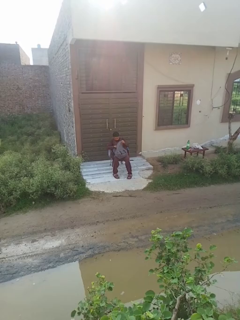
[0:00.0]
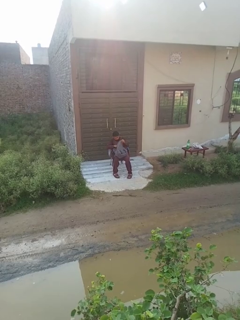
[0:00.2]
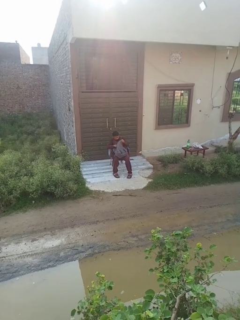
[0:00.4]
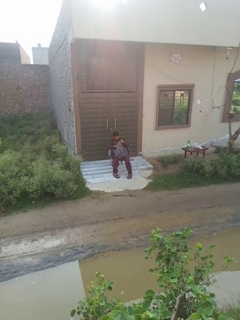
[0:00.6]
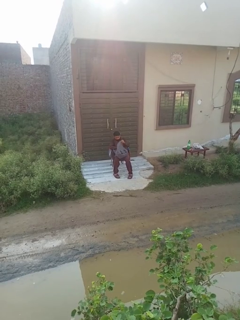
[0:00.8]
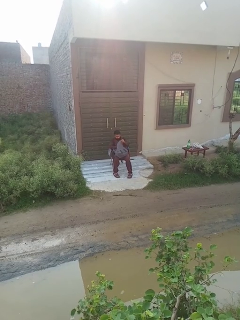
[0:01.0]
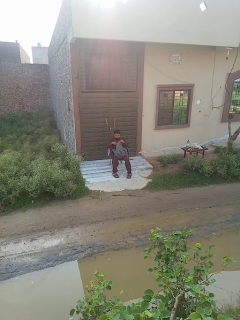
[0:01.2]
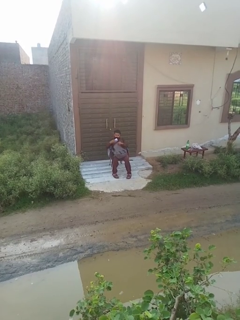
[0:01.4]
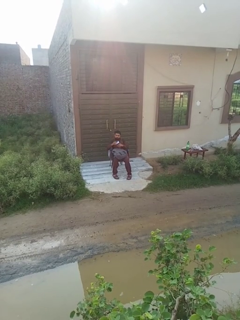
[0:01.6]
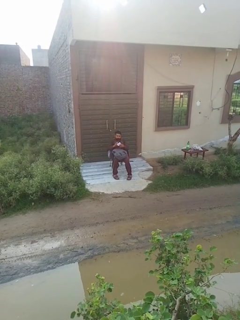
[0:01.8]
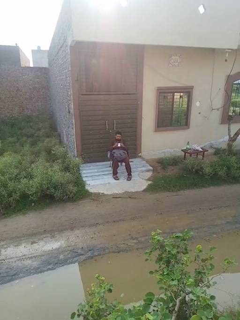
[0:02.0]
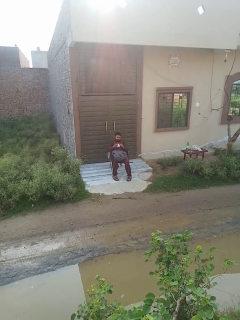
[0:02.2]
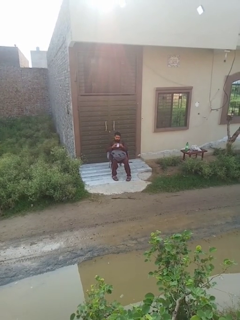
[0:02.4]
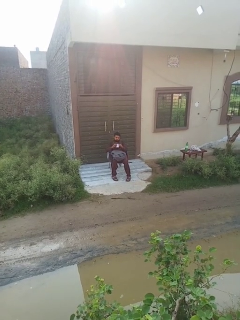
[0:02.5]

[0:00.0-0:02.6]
person takes object from backpack

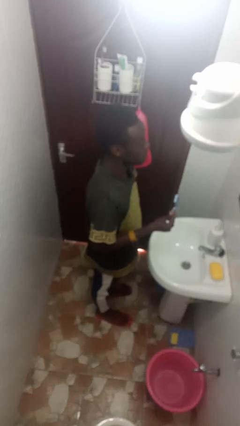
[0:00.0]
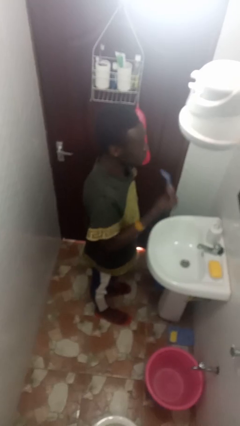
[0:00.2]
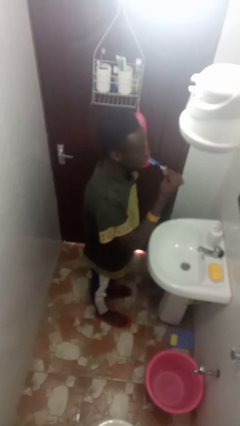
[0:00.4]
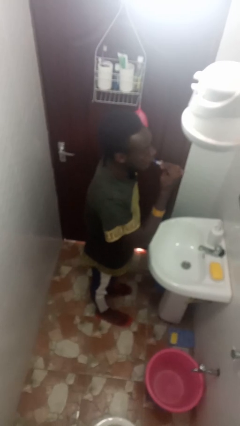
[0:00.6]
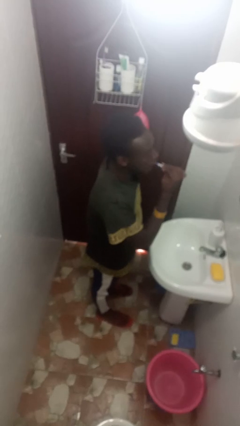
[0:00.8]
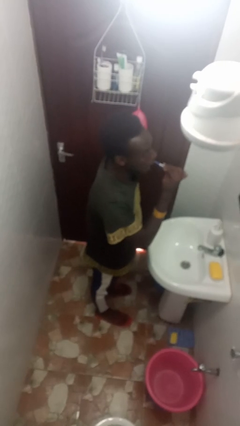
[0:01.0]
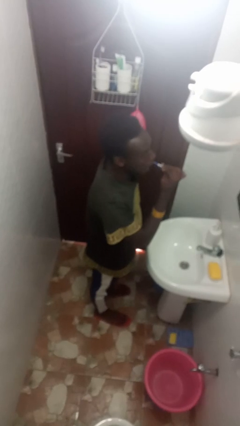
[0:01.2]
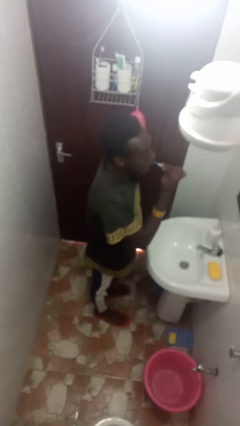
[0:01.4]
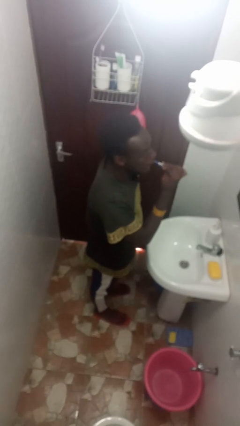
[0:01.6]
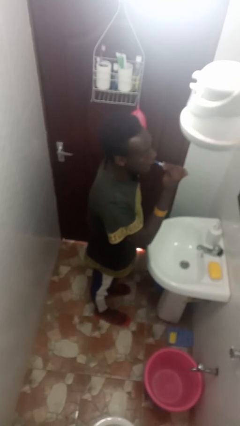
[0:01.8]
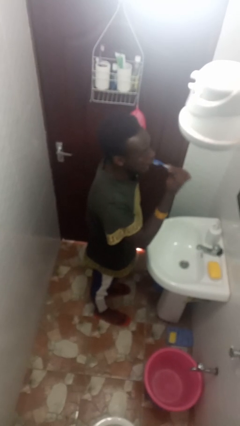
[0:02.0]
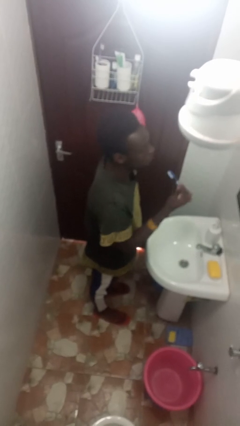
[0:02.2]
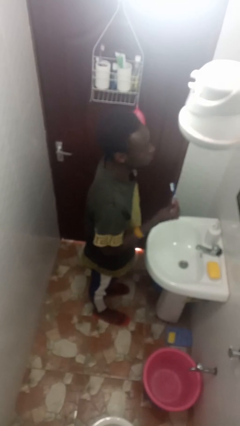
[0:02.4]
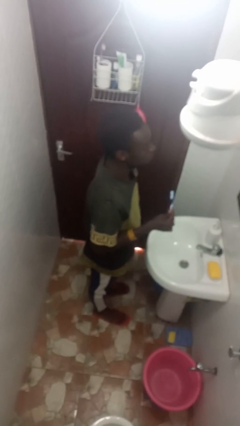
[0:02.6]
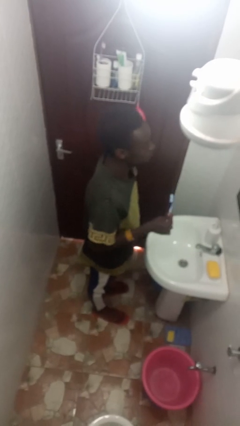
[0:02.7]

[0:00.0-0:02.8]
person brushes teeth

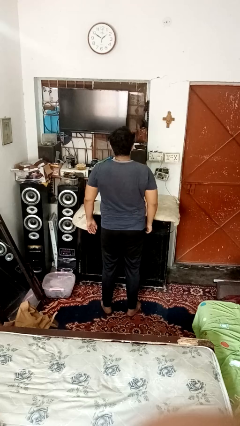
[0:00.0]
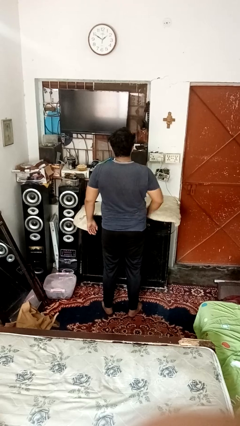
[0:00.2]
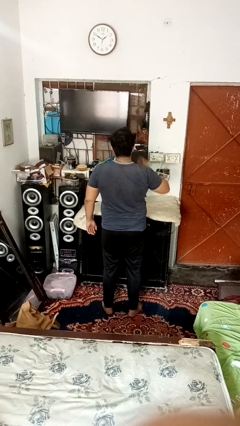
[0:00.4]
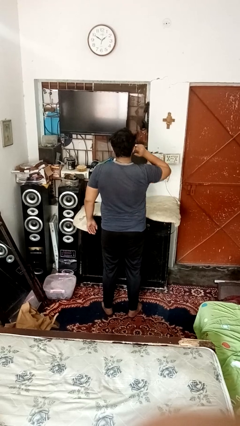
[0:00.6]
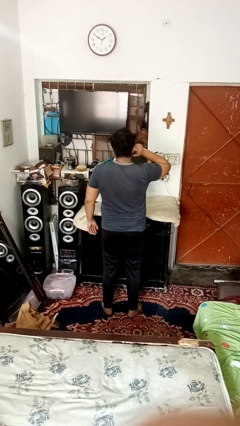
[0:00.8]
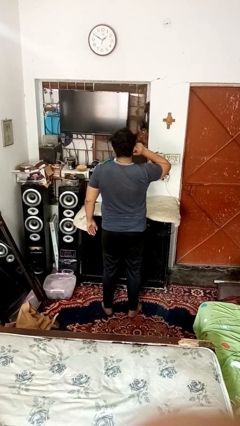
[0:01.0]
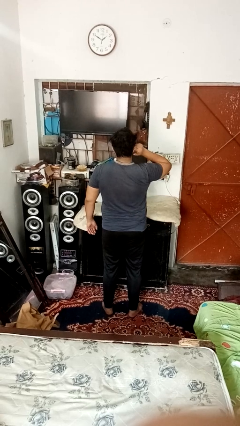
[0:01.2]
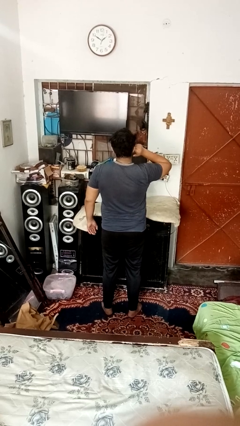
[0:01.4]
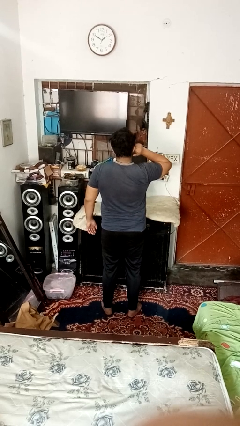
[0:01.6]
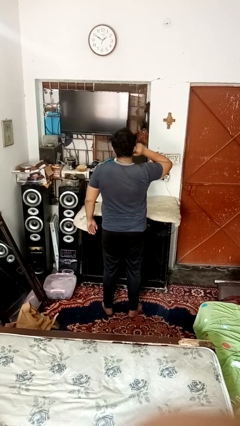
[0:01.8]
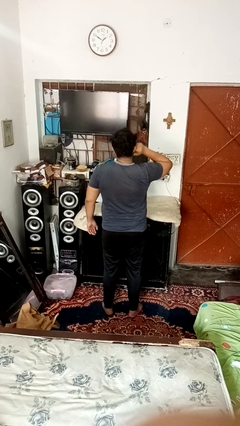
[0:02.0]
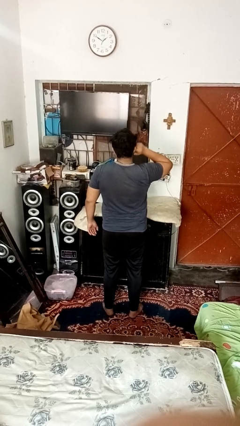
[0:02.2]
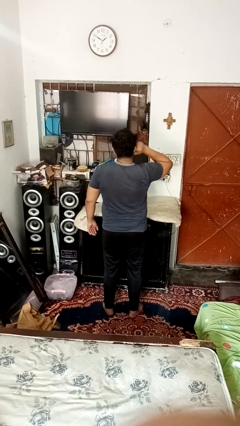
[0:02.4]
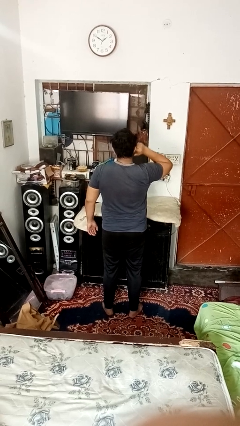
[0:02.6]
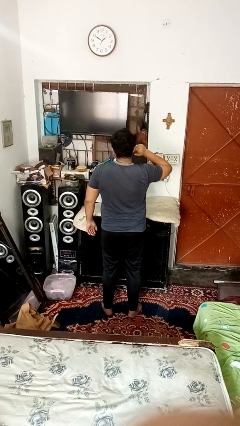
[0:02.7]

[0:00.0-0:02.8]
person puts fingers in ear

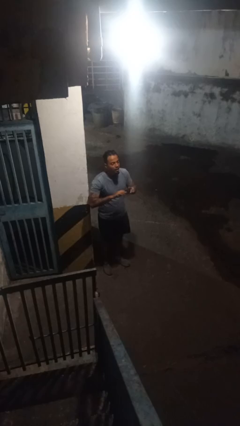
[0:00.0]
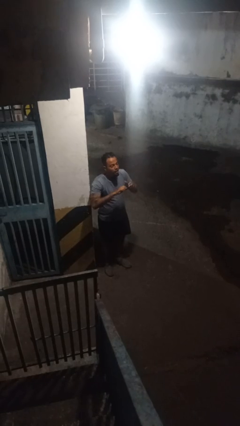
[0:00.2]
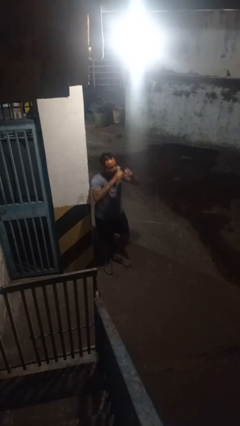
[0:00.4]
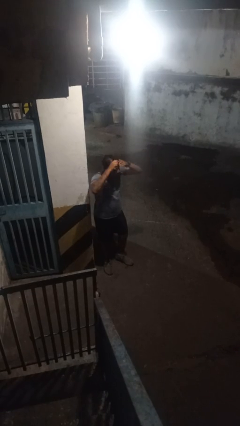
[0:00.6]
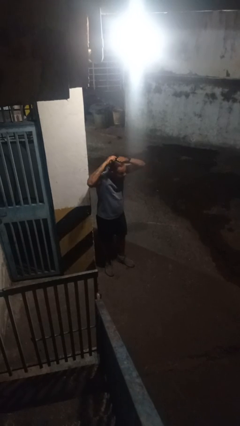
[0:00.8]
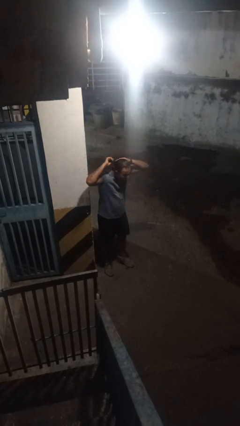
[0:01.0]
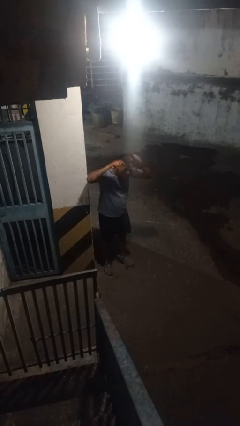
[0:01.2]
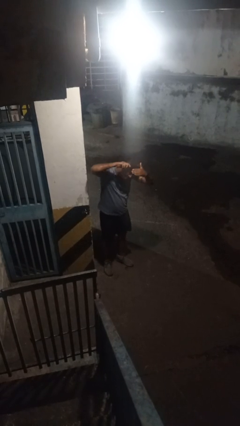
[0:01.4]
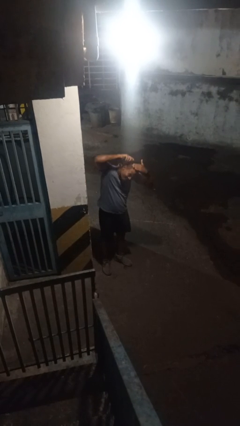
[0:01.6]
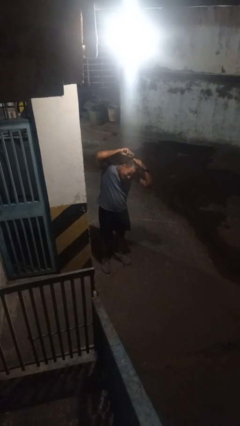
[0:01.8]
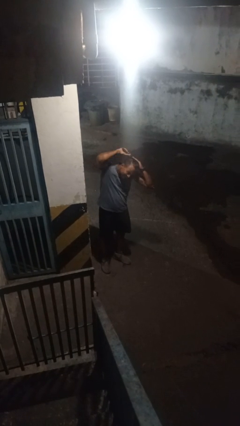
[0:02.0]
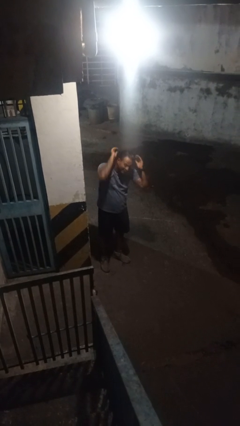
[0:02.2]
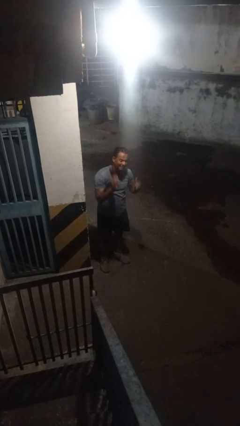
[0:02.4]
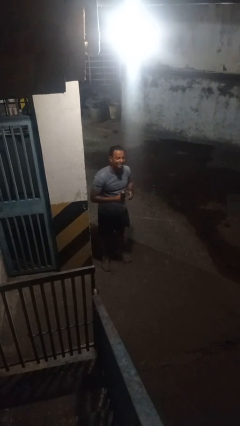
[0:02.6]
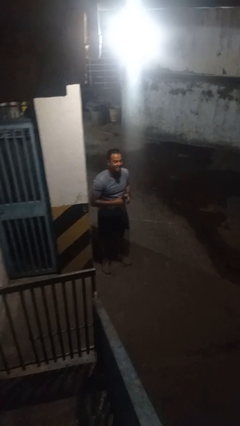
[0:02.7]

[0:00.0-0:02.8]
person brushes hair

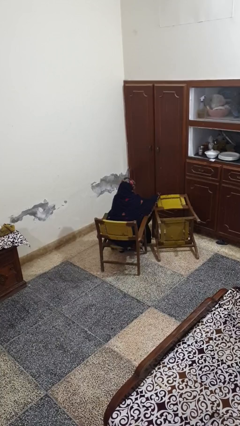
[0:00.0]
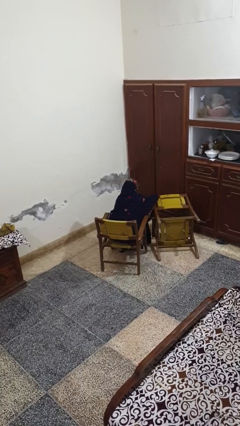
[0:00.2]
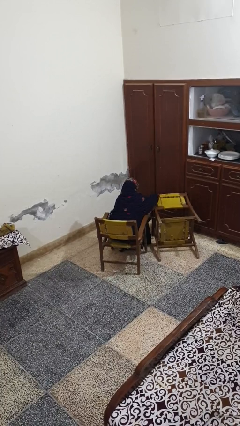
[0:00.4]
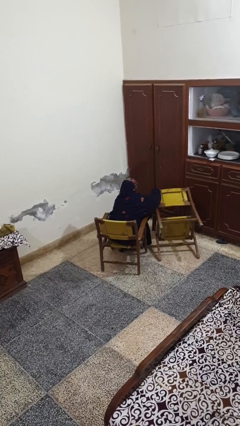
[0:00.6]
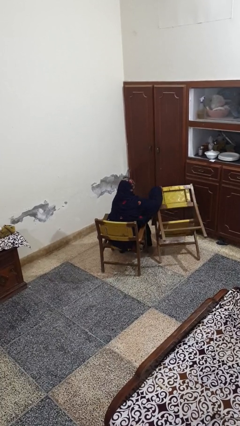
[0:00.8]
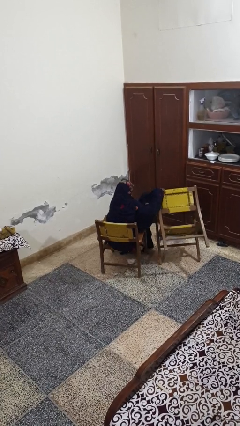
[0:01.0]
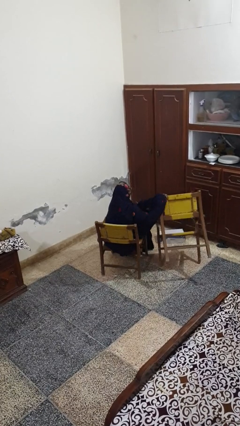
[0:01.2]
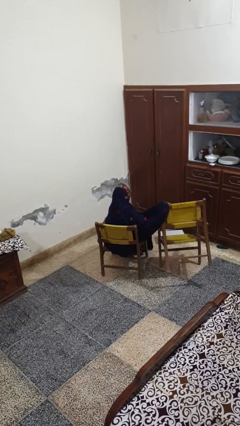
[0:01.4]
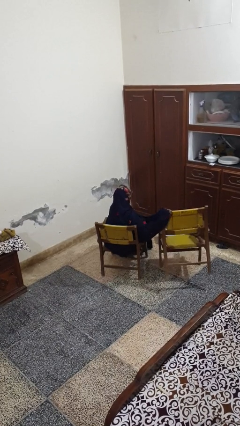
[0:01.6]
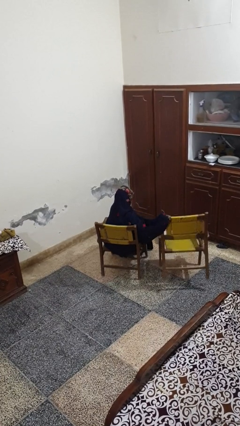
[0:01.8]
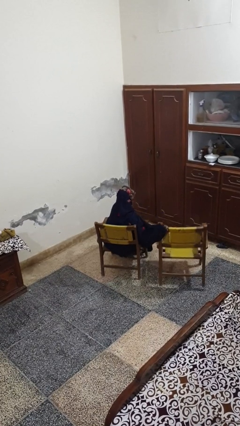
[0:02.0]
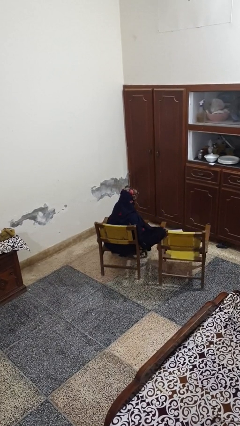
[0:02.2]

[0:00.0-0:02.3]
person sets upright furniture

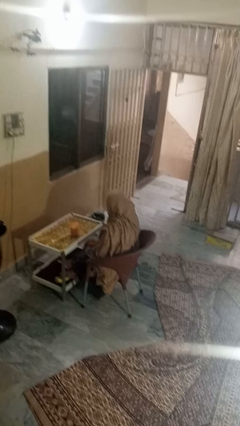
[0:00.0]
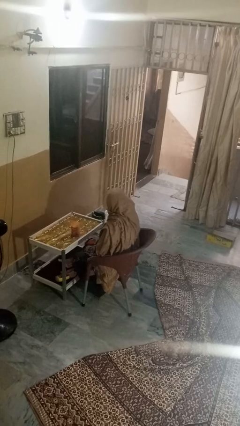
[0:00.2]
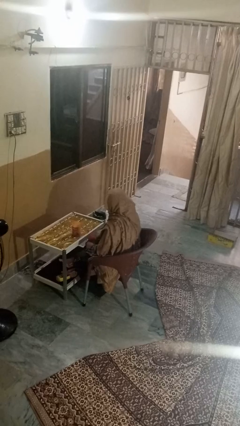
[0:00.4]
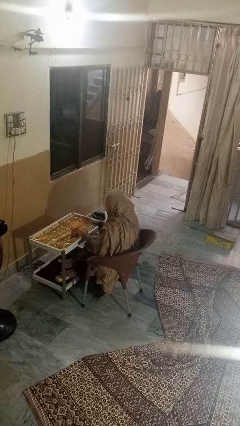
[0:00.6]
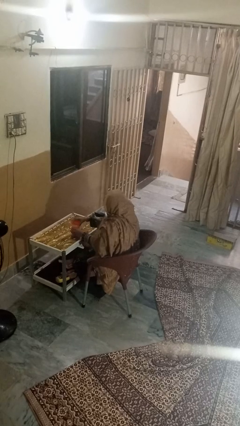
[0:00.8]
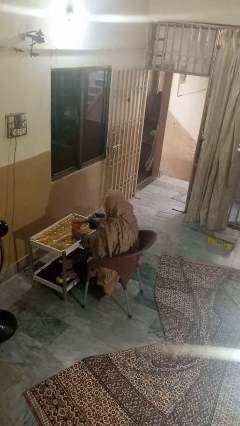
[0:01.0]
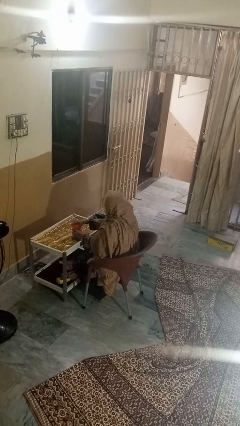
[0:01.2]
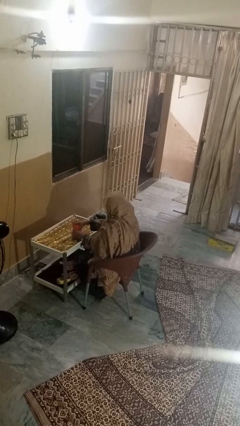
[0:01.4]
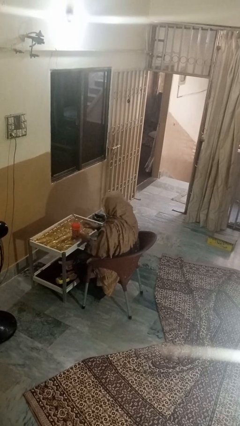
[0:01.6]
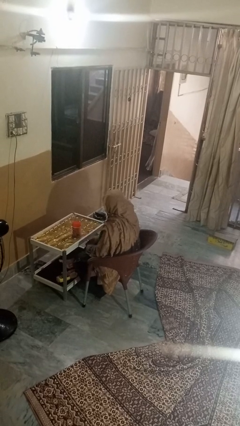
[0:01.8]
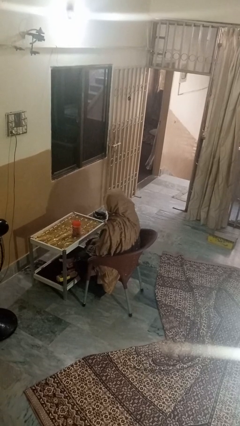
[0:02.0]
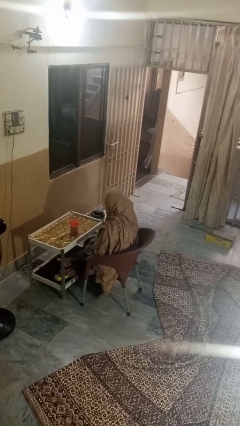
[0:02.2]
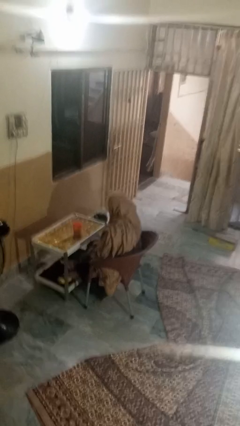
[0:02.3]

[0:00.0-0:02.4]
person closes jar

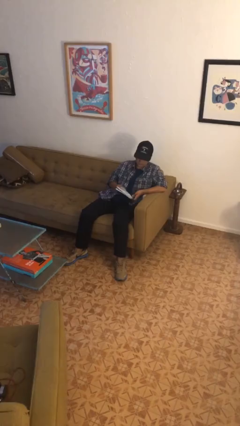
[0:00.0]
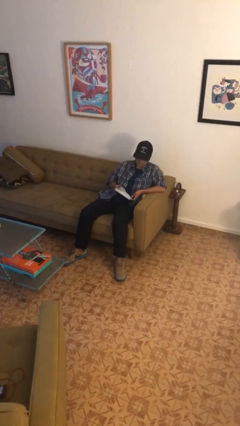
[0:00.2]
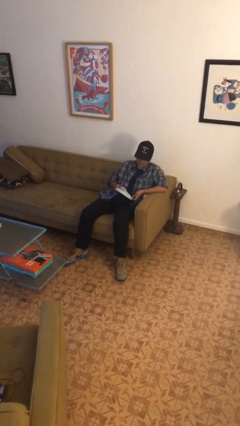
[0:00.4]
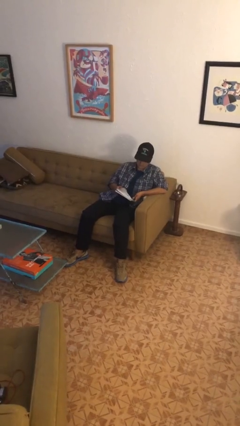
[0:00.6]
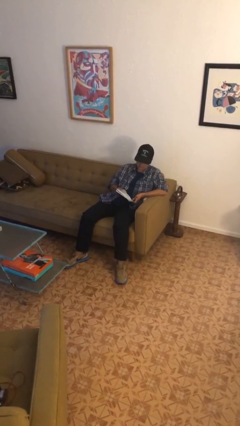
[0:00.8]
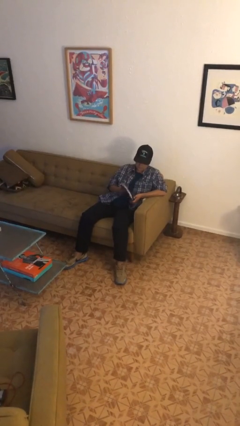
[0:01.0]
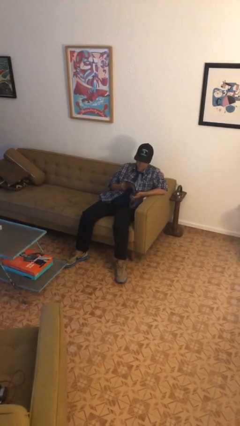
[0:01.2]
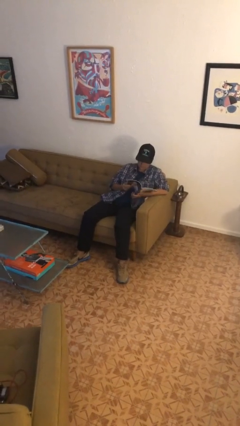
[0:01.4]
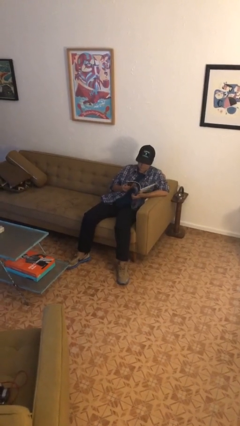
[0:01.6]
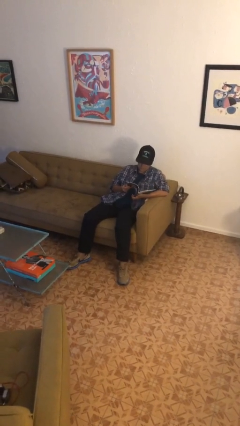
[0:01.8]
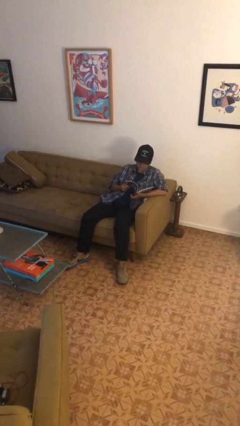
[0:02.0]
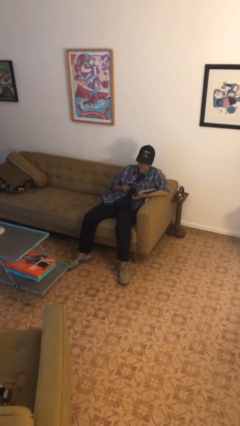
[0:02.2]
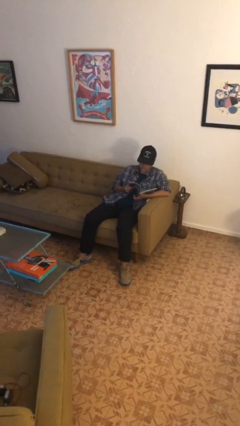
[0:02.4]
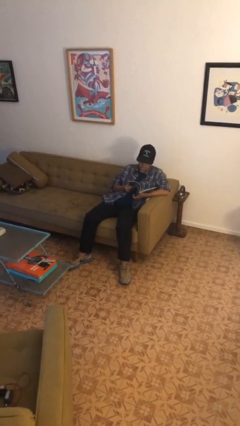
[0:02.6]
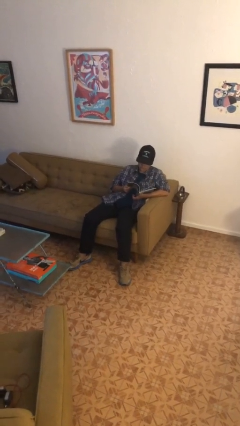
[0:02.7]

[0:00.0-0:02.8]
person reads magazine
